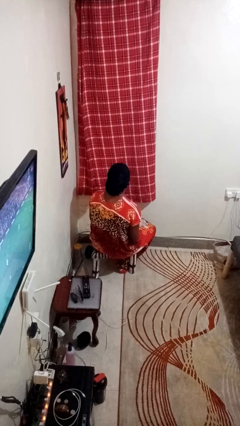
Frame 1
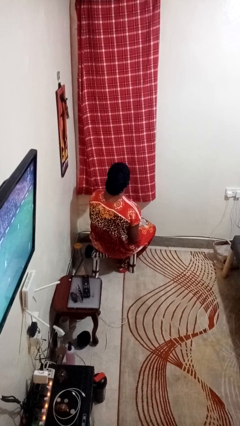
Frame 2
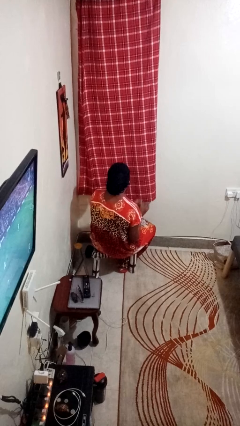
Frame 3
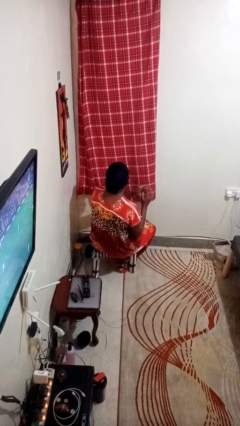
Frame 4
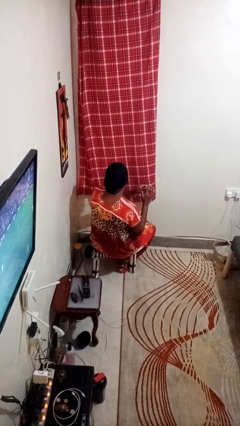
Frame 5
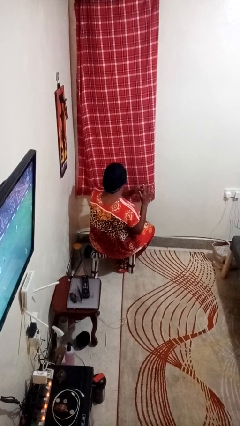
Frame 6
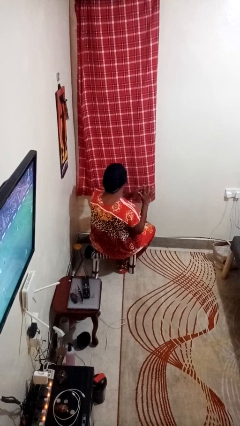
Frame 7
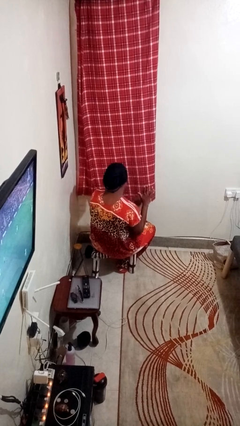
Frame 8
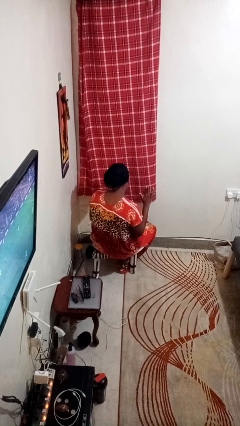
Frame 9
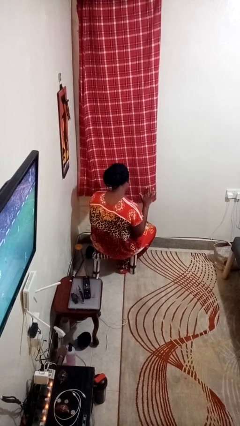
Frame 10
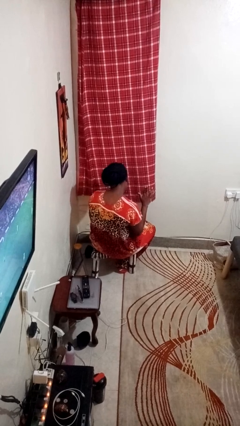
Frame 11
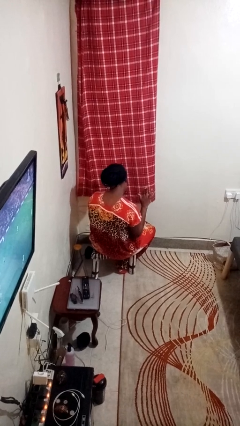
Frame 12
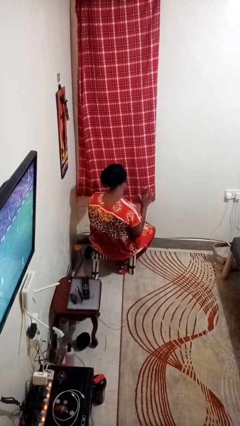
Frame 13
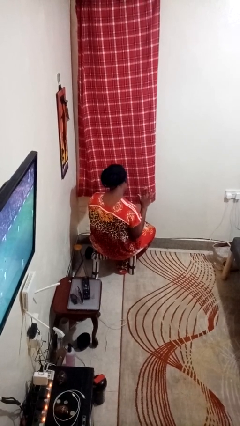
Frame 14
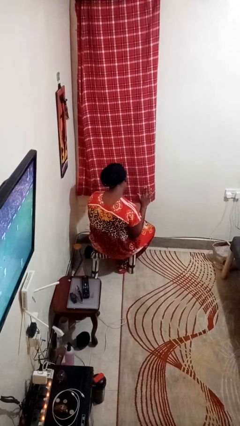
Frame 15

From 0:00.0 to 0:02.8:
person puts on ring

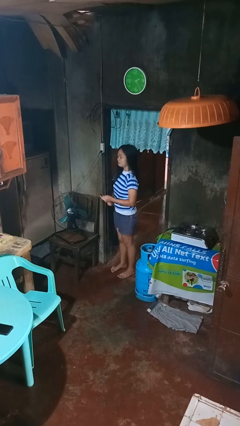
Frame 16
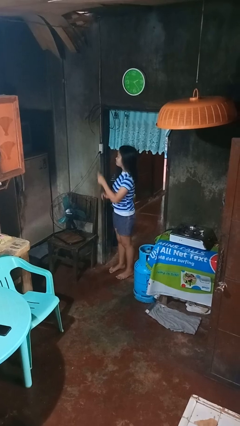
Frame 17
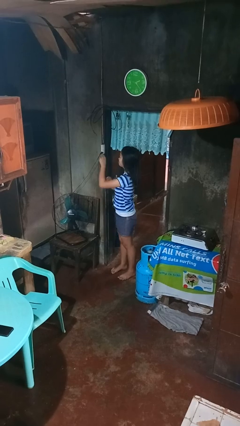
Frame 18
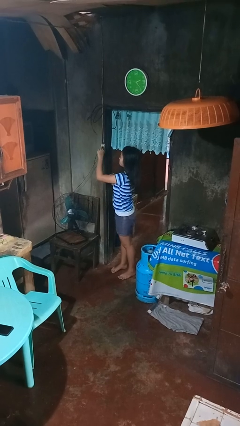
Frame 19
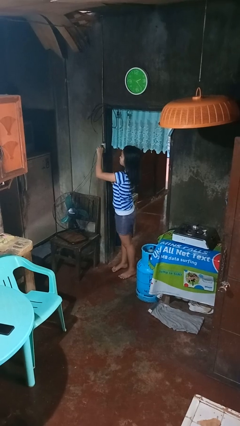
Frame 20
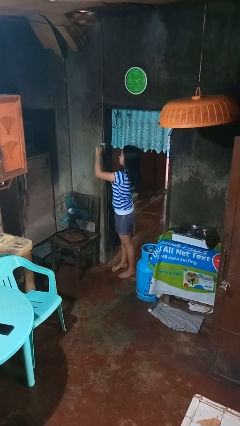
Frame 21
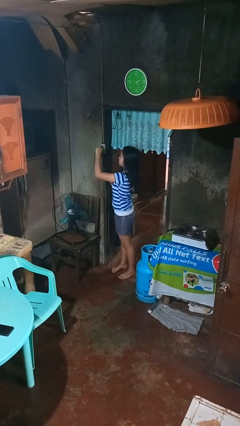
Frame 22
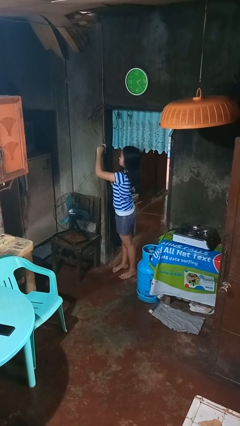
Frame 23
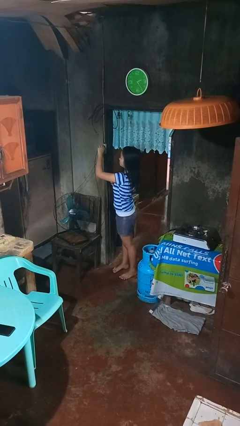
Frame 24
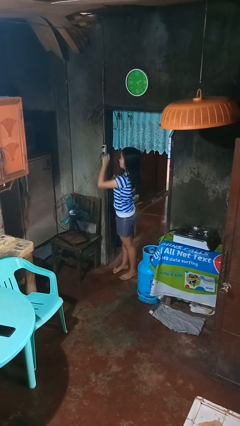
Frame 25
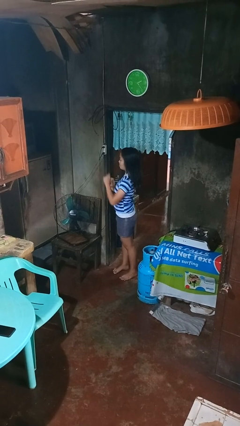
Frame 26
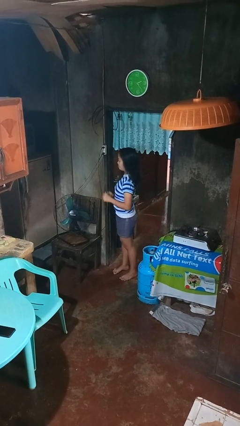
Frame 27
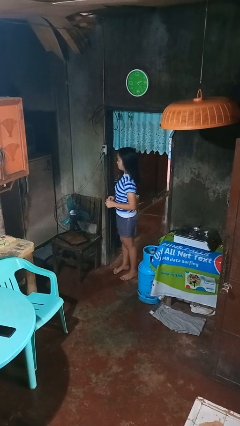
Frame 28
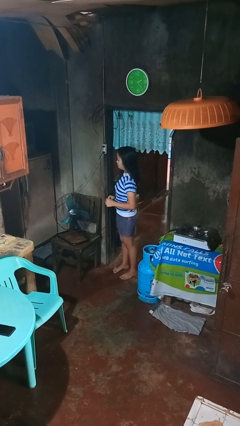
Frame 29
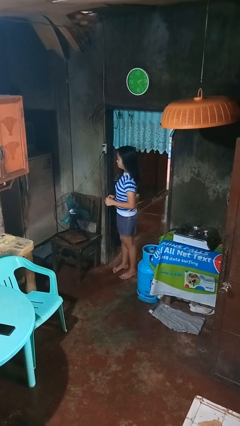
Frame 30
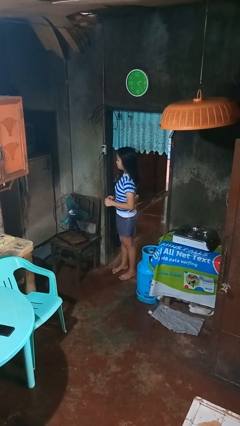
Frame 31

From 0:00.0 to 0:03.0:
person plugs into electrical socket

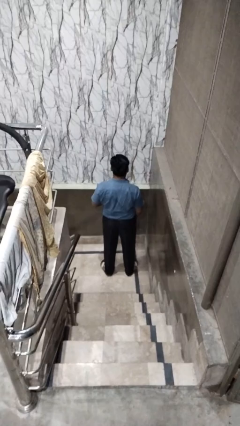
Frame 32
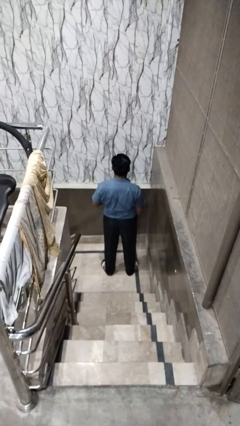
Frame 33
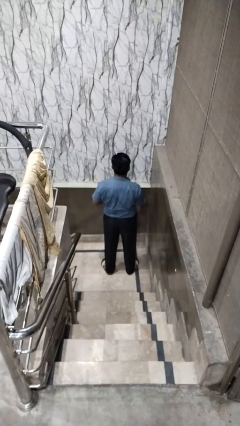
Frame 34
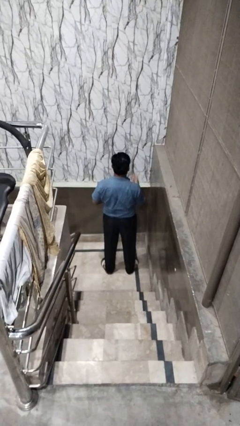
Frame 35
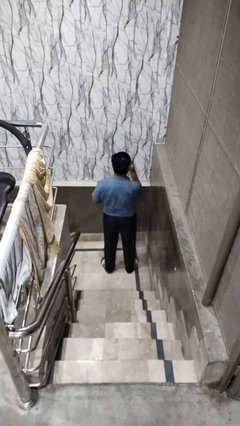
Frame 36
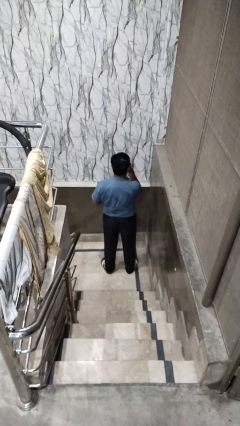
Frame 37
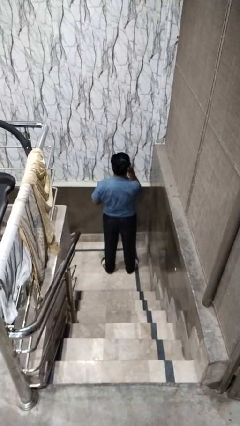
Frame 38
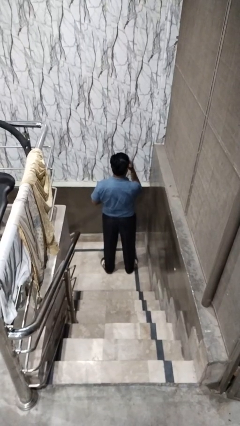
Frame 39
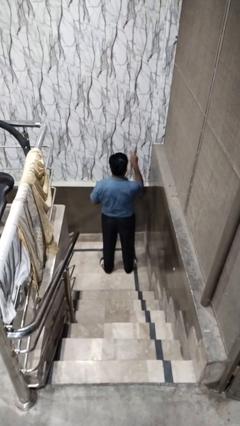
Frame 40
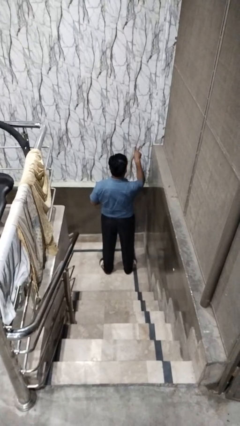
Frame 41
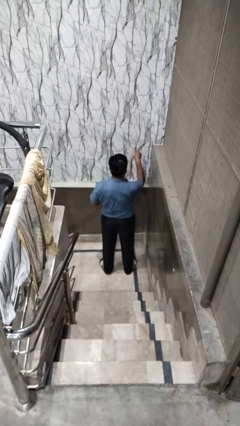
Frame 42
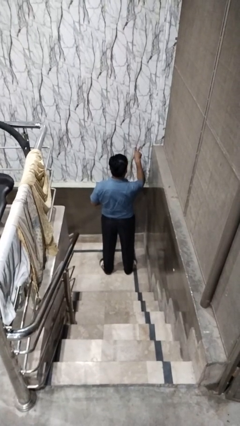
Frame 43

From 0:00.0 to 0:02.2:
person gestures watch closely

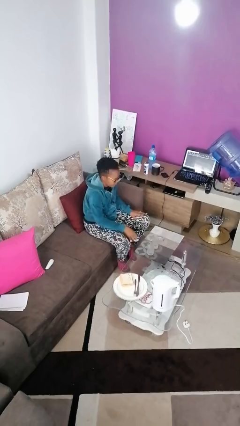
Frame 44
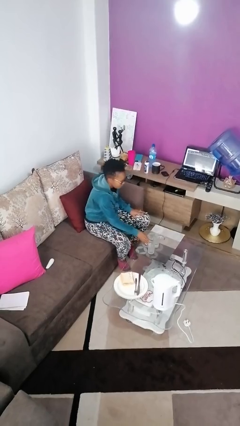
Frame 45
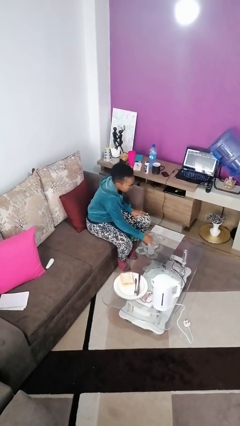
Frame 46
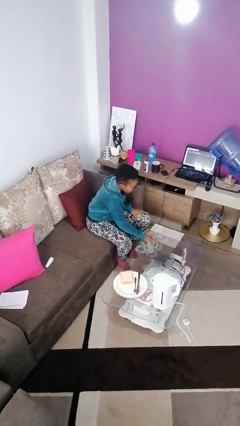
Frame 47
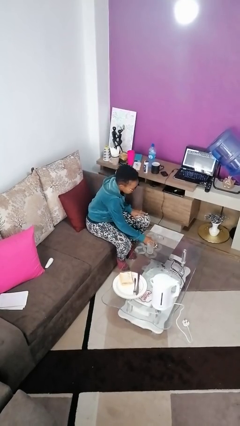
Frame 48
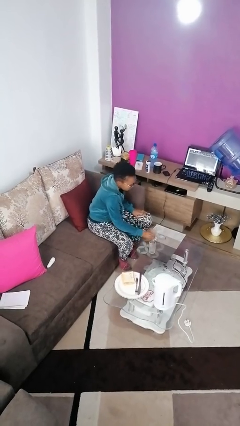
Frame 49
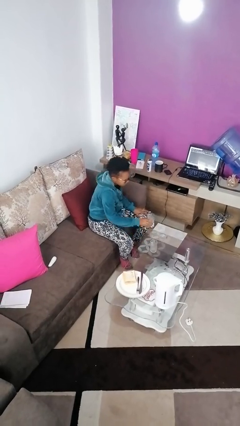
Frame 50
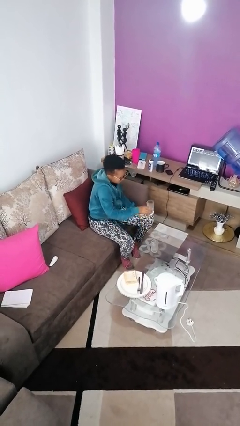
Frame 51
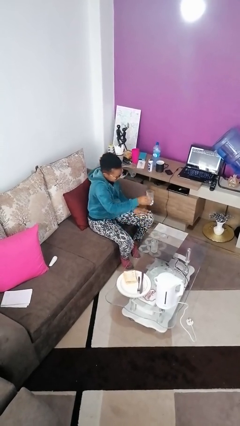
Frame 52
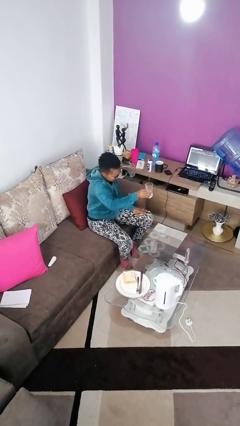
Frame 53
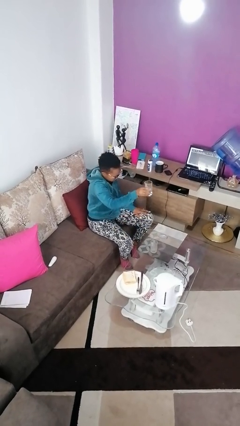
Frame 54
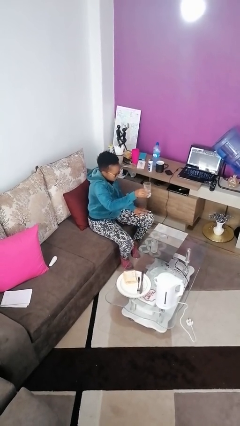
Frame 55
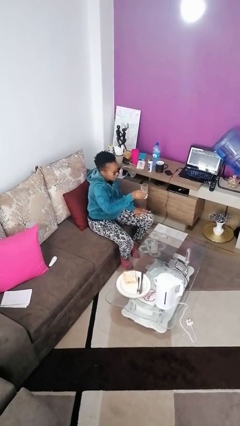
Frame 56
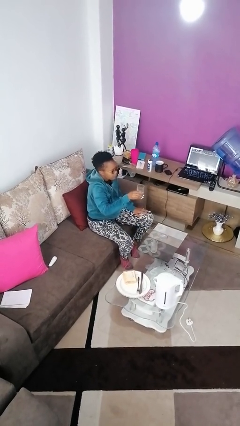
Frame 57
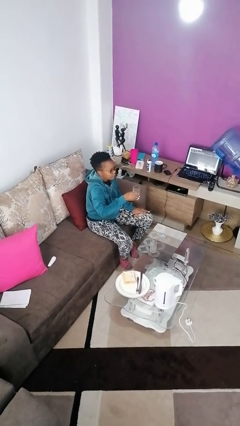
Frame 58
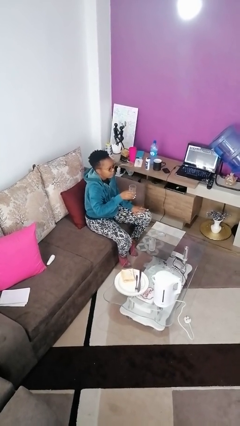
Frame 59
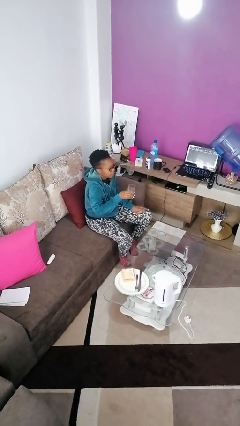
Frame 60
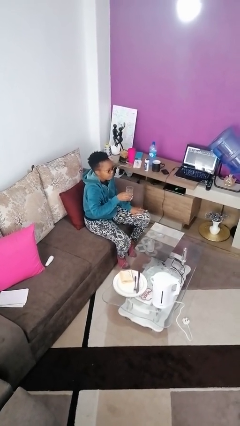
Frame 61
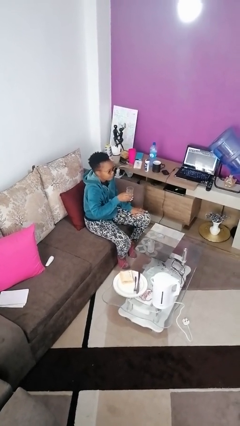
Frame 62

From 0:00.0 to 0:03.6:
person picks up object from table

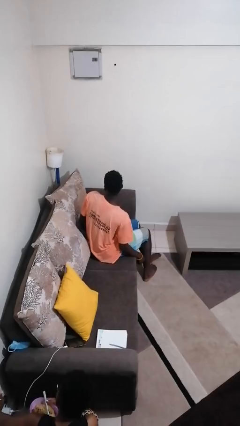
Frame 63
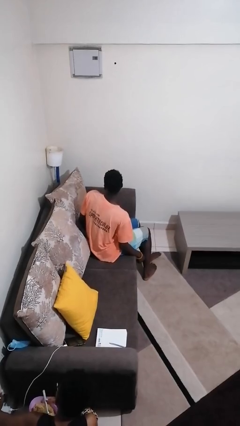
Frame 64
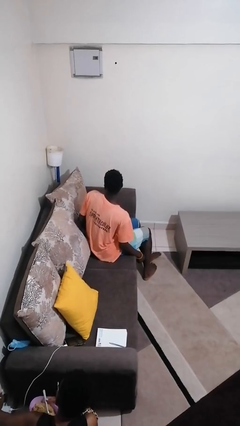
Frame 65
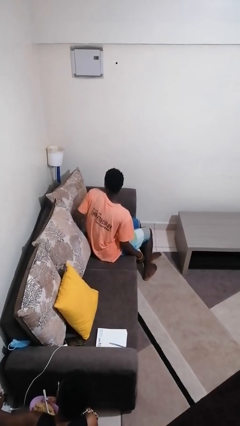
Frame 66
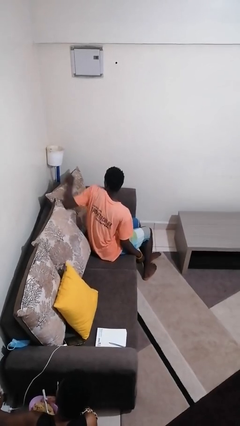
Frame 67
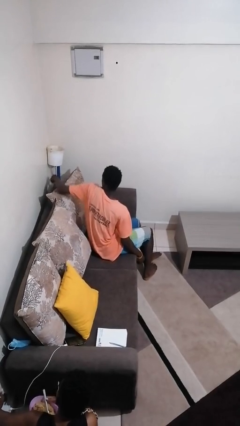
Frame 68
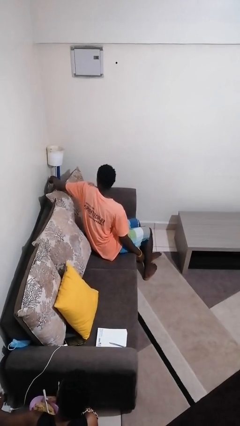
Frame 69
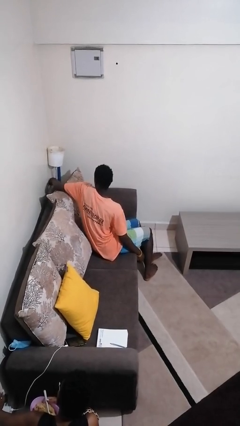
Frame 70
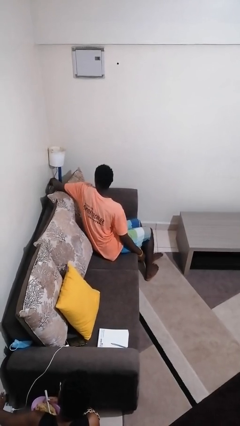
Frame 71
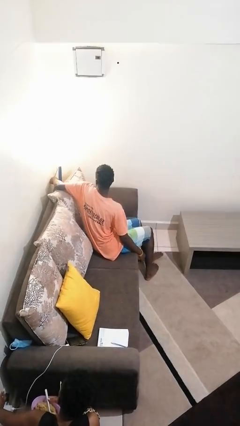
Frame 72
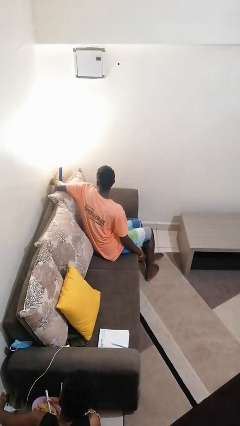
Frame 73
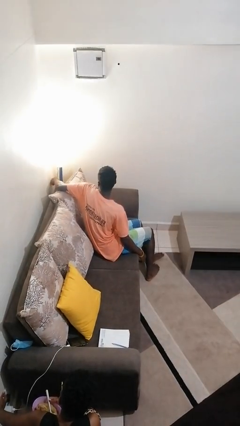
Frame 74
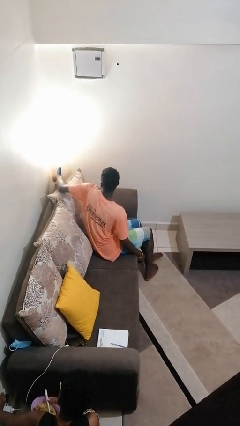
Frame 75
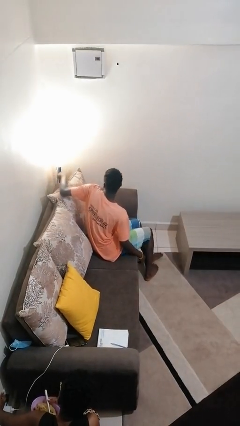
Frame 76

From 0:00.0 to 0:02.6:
person turns on lamp

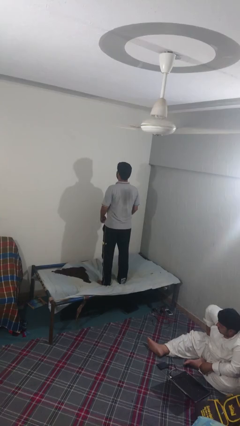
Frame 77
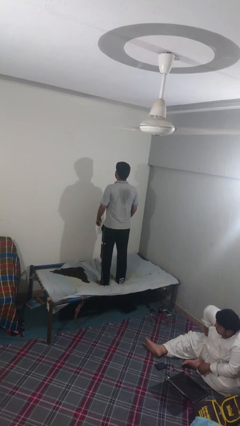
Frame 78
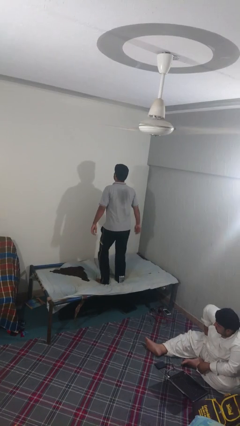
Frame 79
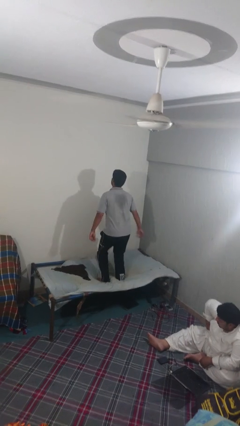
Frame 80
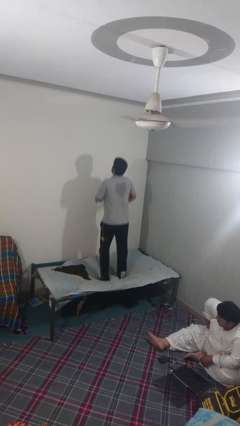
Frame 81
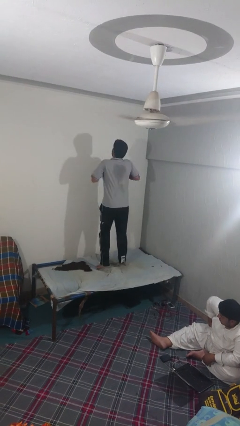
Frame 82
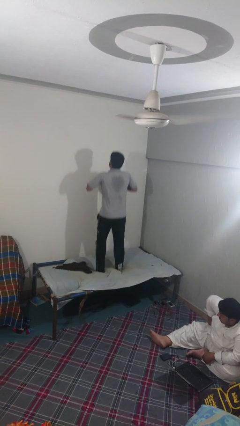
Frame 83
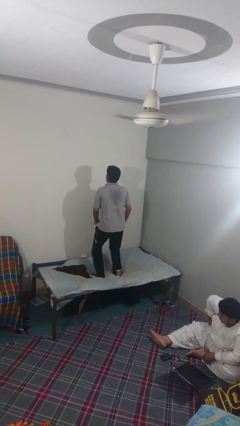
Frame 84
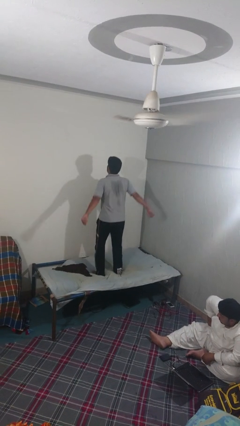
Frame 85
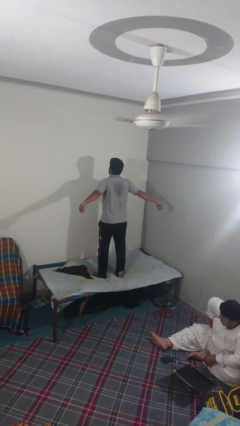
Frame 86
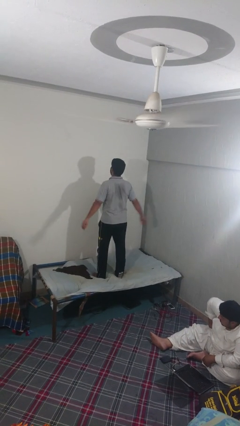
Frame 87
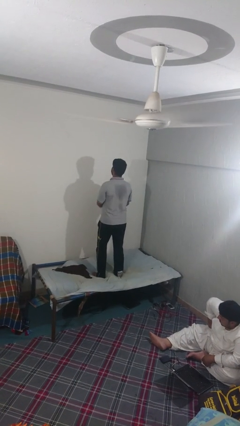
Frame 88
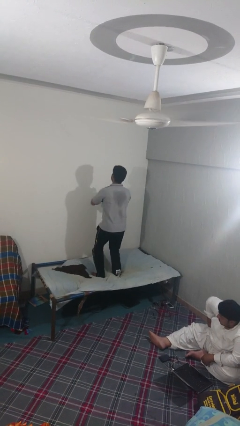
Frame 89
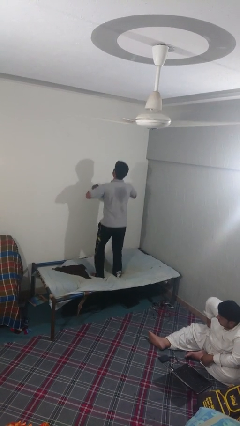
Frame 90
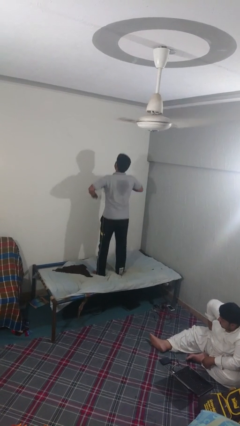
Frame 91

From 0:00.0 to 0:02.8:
person jumps on bed
